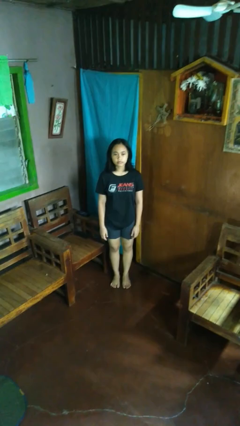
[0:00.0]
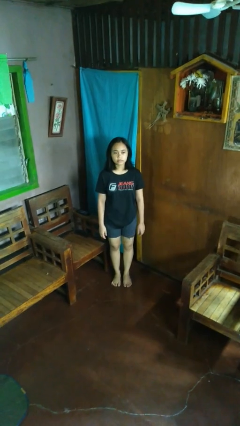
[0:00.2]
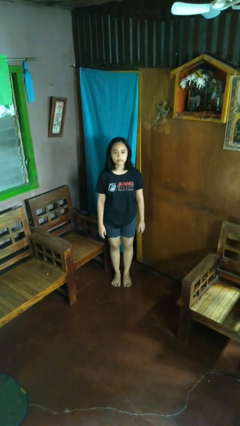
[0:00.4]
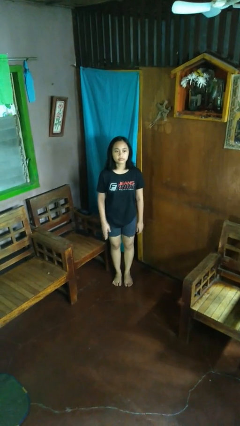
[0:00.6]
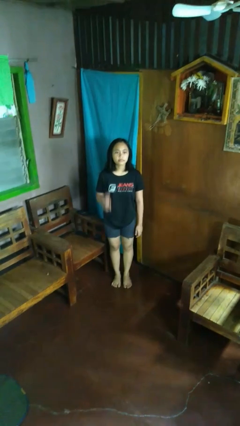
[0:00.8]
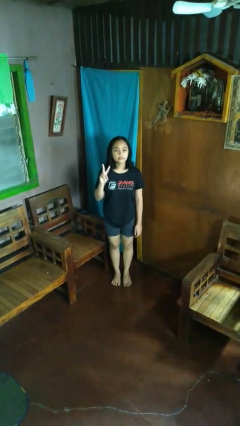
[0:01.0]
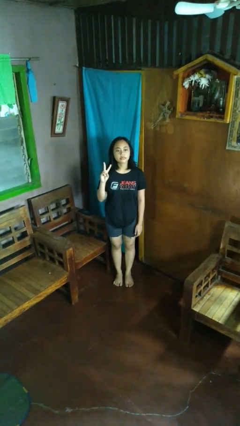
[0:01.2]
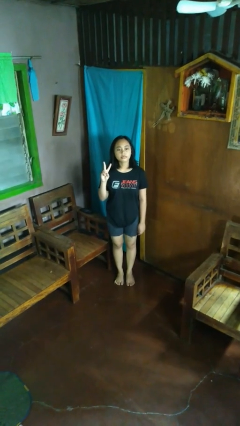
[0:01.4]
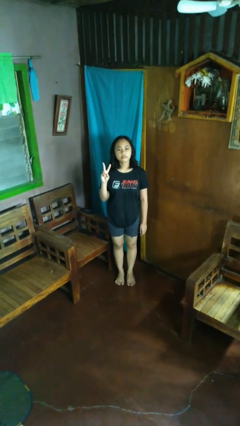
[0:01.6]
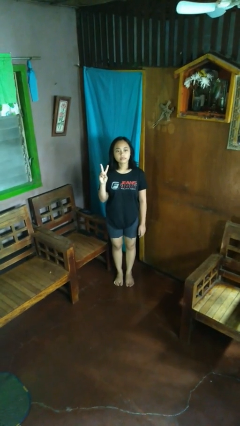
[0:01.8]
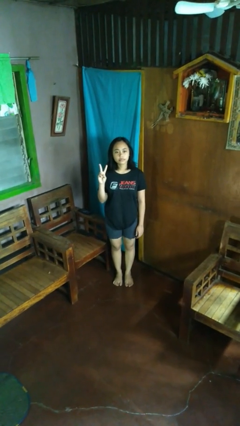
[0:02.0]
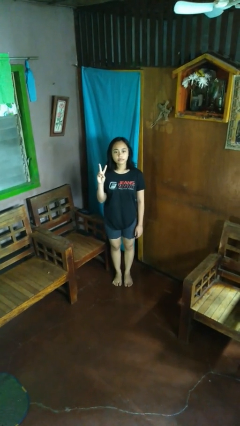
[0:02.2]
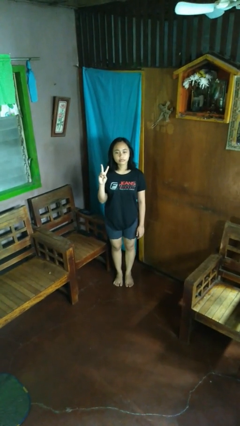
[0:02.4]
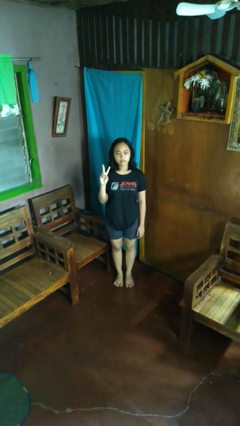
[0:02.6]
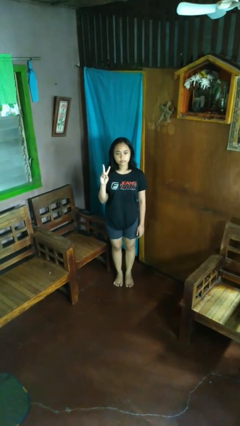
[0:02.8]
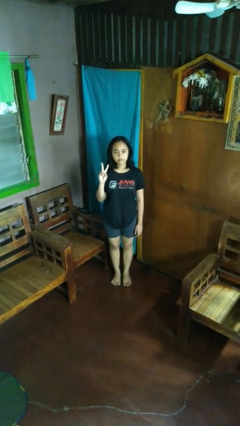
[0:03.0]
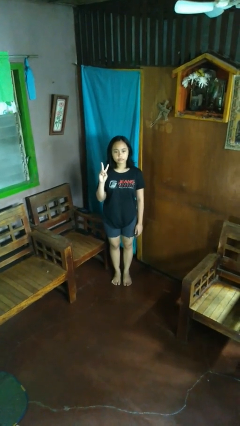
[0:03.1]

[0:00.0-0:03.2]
person gestures peace

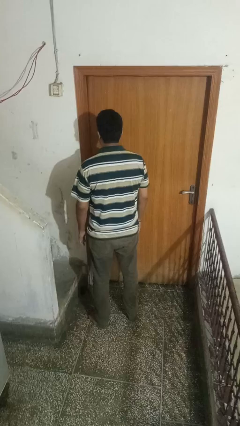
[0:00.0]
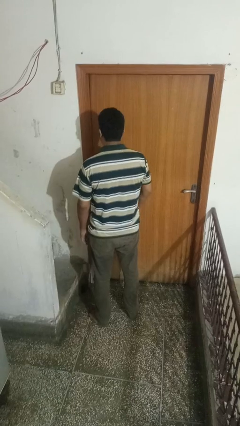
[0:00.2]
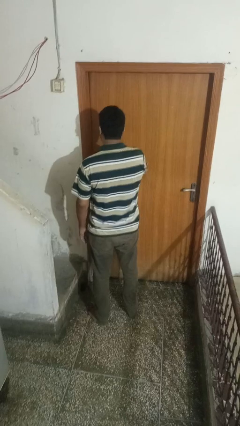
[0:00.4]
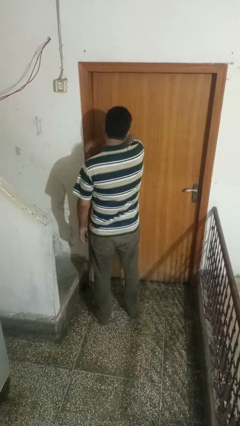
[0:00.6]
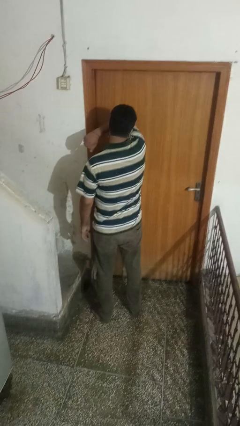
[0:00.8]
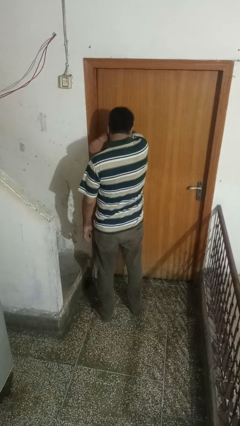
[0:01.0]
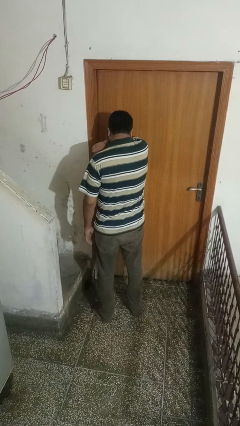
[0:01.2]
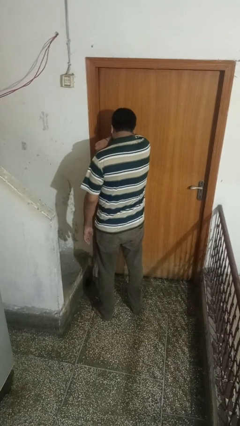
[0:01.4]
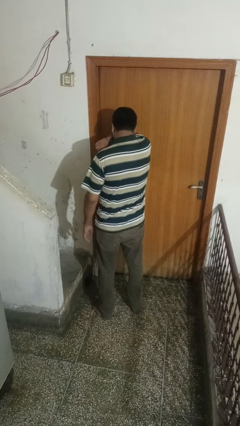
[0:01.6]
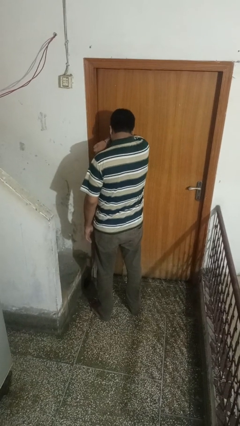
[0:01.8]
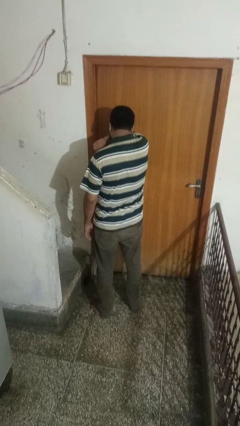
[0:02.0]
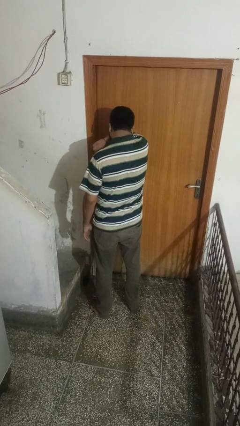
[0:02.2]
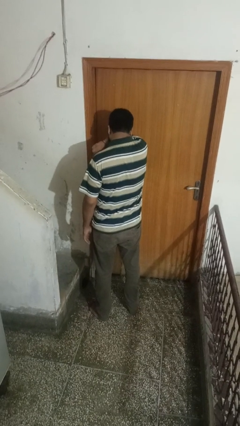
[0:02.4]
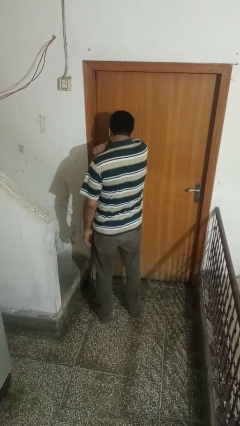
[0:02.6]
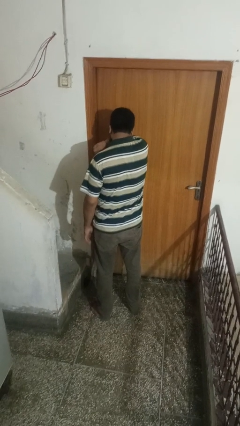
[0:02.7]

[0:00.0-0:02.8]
person sneezes into arm

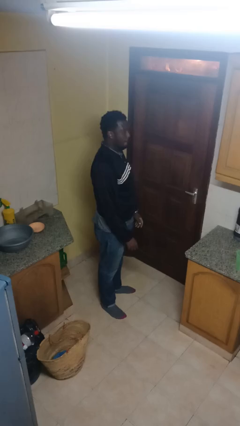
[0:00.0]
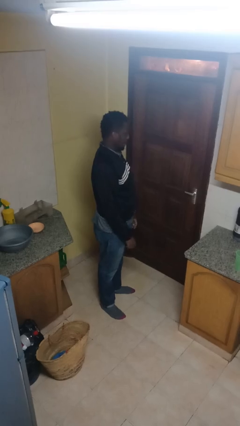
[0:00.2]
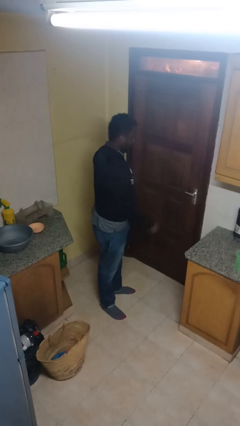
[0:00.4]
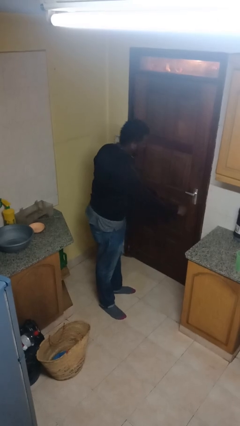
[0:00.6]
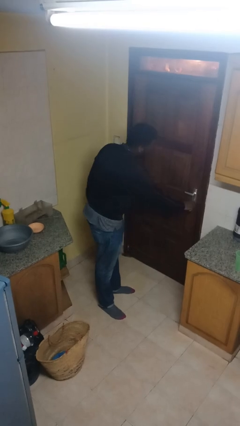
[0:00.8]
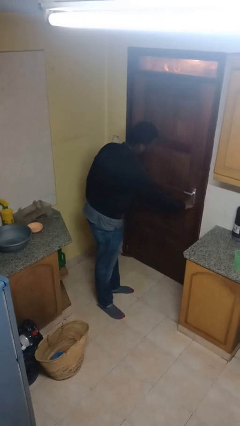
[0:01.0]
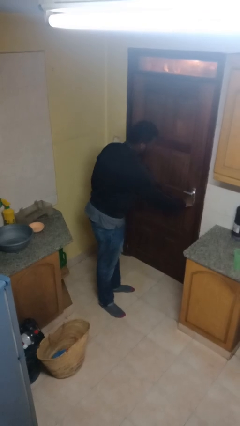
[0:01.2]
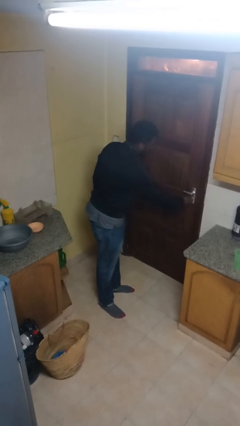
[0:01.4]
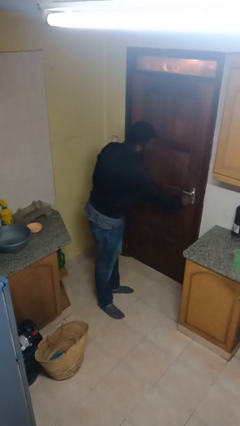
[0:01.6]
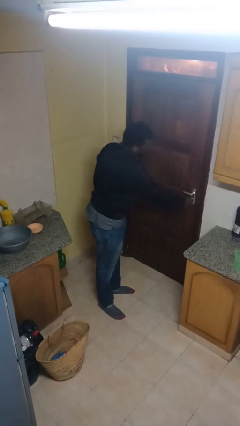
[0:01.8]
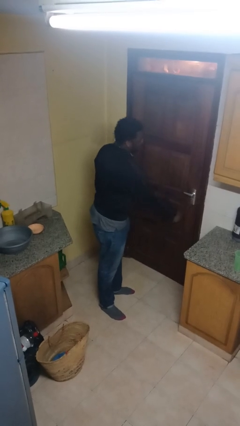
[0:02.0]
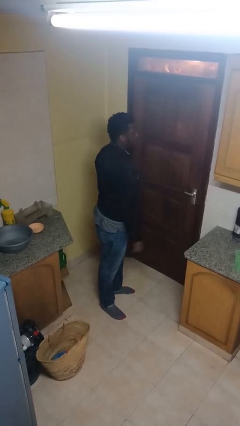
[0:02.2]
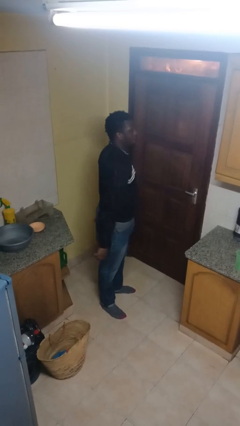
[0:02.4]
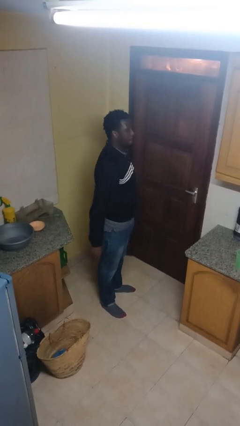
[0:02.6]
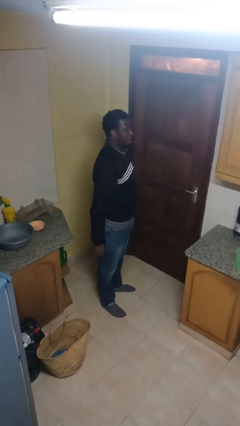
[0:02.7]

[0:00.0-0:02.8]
person locks door with keys

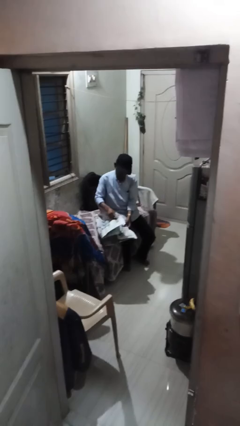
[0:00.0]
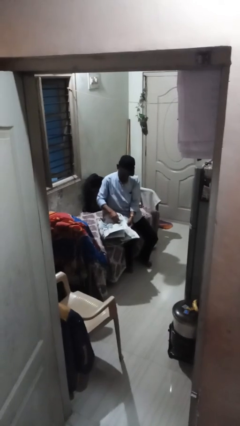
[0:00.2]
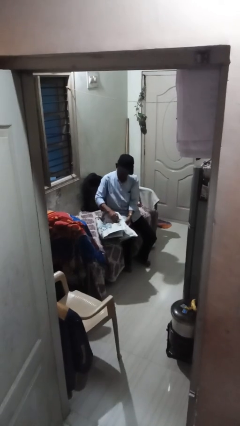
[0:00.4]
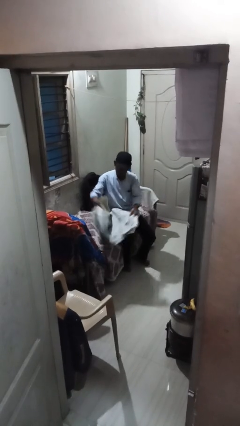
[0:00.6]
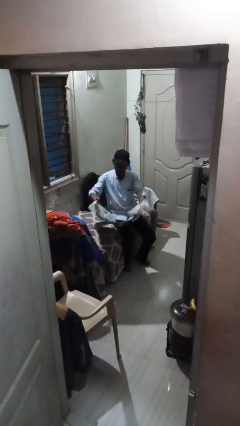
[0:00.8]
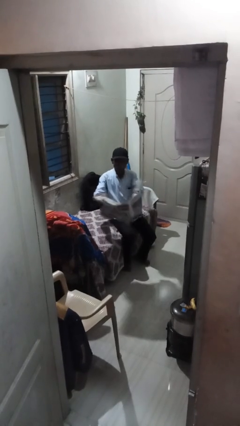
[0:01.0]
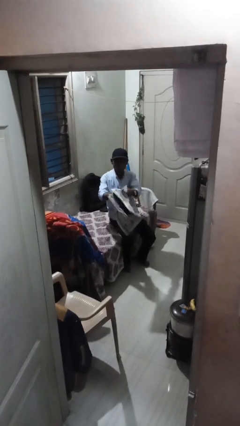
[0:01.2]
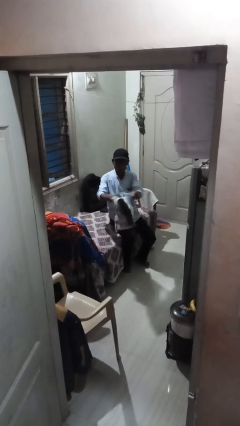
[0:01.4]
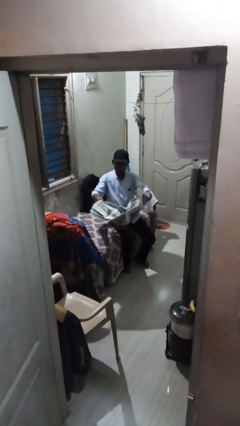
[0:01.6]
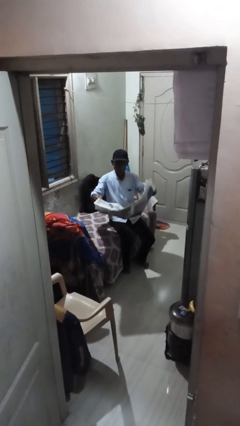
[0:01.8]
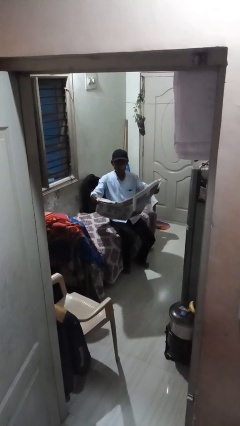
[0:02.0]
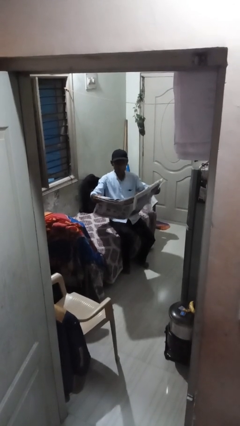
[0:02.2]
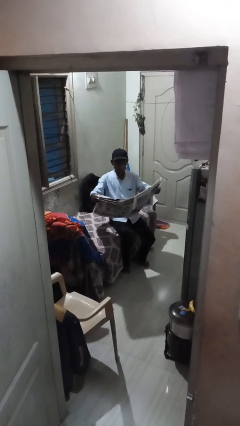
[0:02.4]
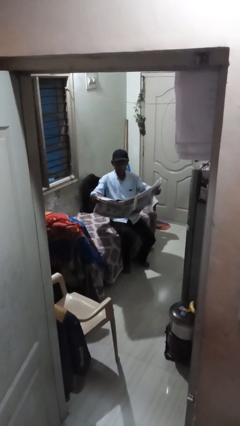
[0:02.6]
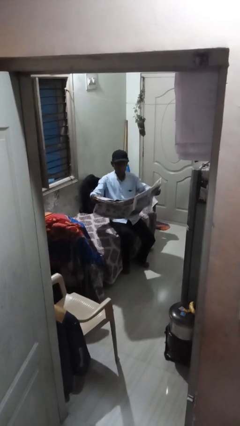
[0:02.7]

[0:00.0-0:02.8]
person reads newspaper

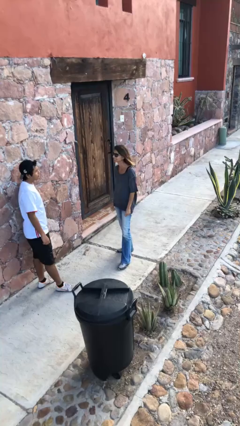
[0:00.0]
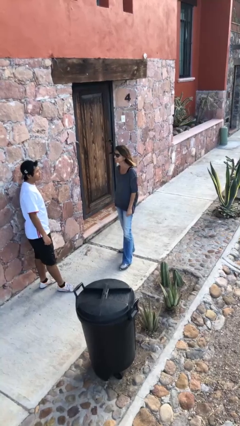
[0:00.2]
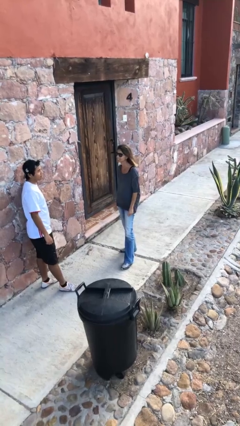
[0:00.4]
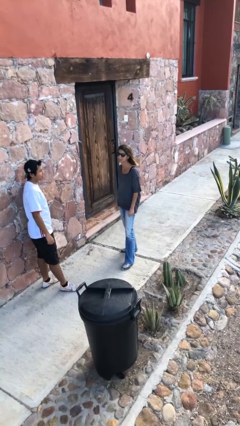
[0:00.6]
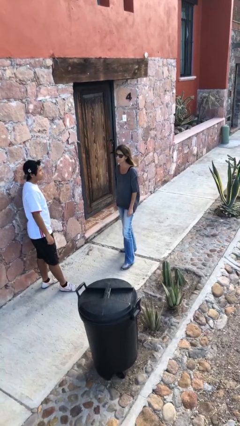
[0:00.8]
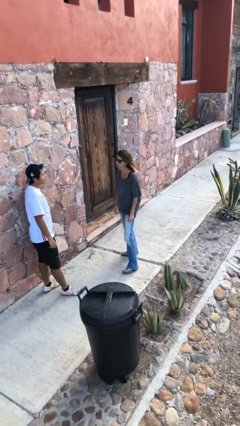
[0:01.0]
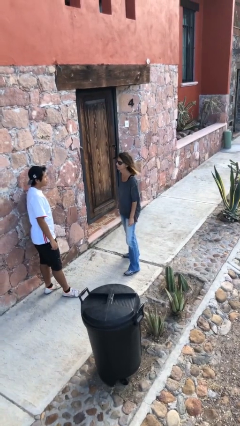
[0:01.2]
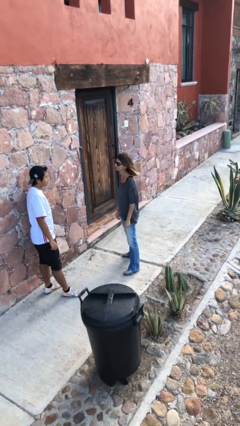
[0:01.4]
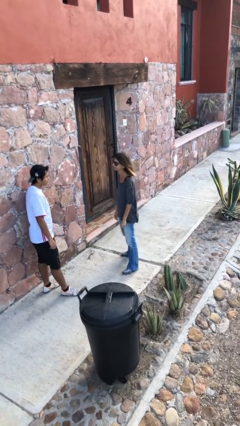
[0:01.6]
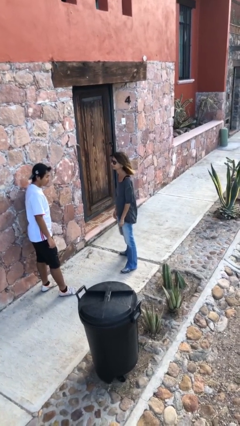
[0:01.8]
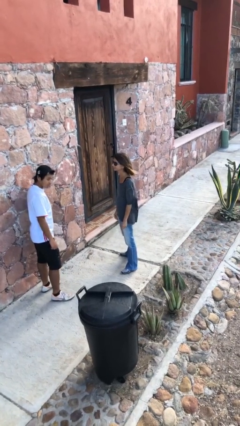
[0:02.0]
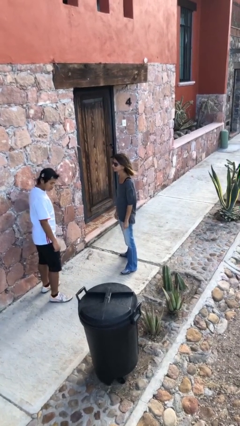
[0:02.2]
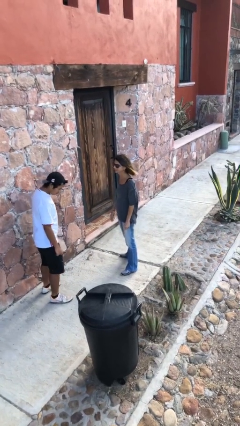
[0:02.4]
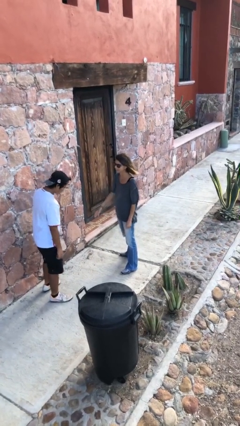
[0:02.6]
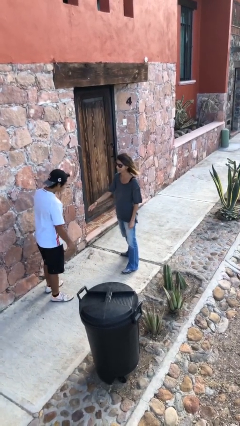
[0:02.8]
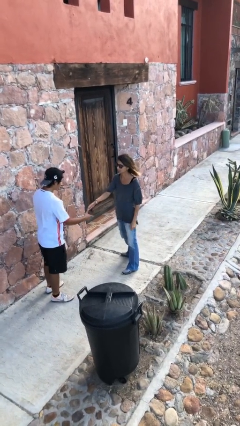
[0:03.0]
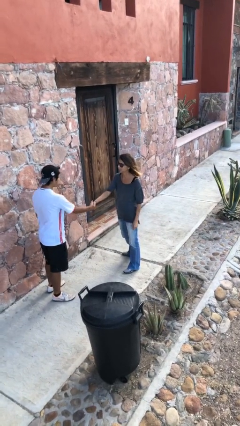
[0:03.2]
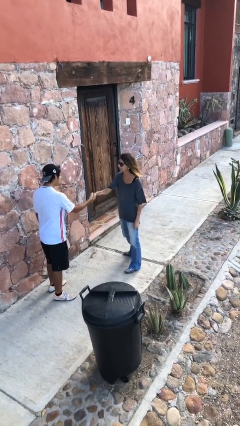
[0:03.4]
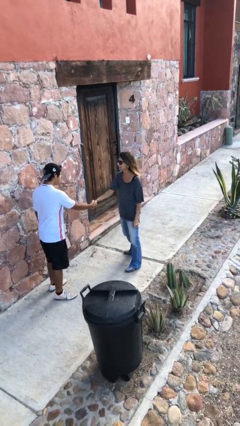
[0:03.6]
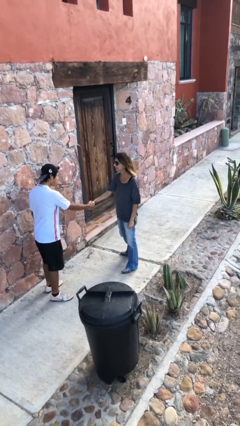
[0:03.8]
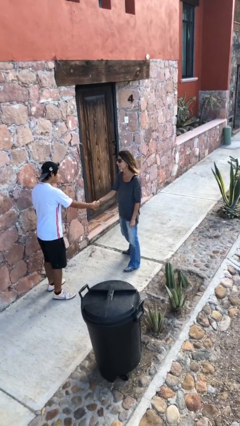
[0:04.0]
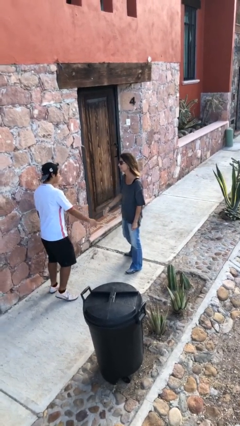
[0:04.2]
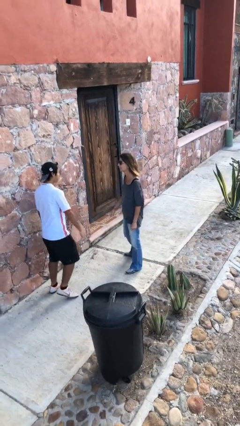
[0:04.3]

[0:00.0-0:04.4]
person shakes hand

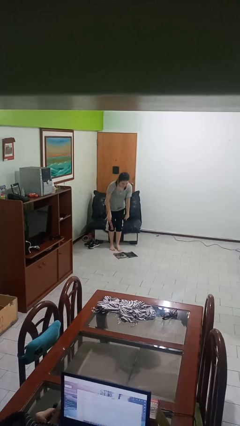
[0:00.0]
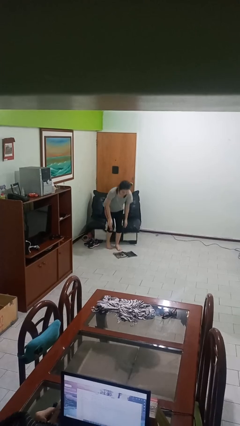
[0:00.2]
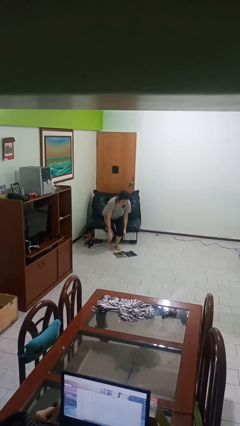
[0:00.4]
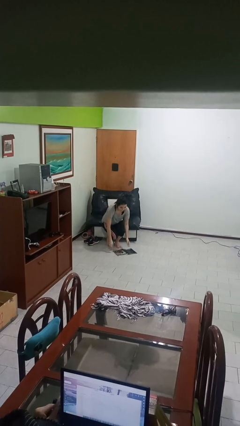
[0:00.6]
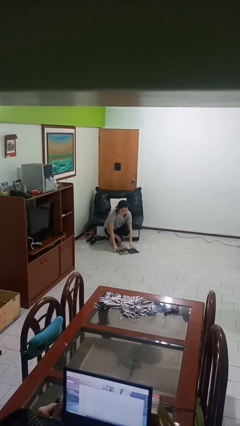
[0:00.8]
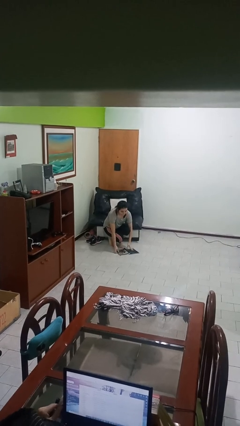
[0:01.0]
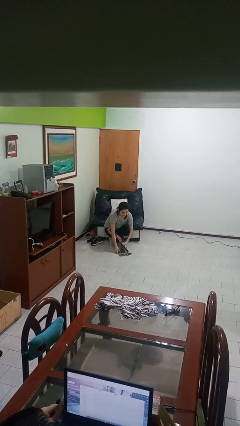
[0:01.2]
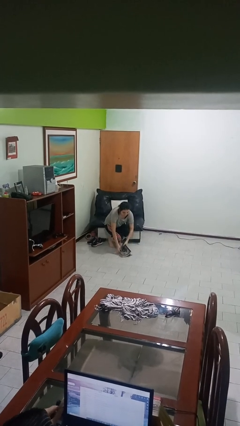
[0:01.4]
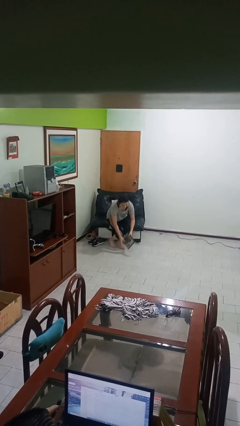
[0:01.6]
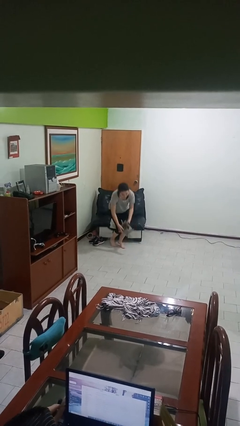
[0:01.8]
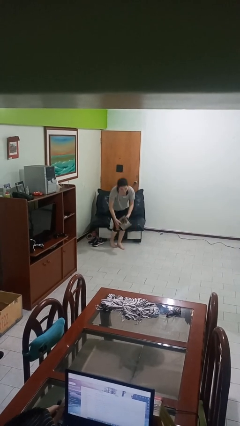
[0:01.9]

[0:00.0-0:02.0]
person picks up object from floor
